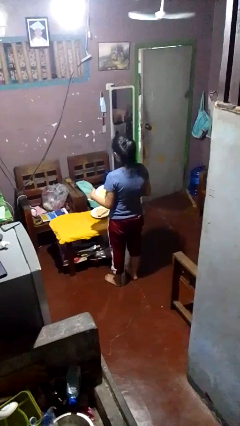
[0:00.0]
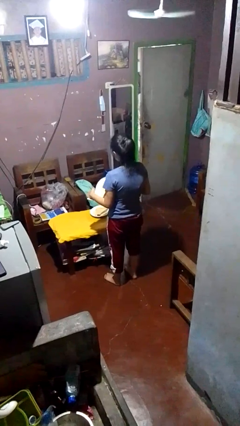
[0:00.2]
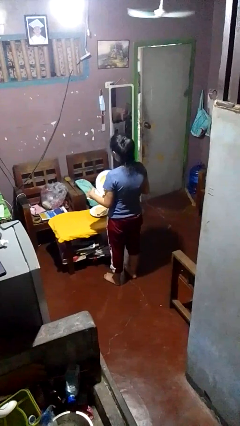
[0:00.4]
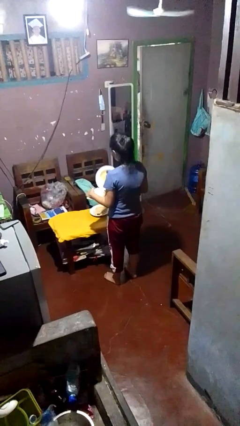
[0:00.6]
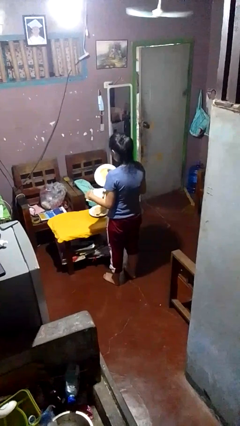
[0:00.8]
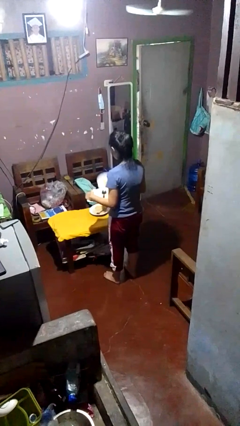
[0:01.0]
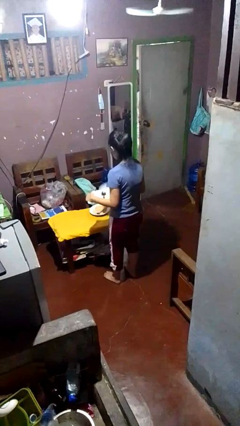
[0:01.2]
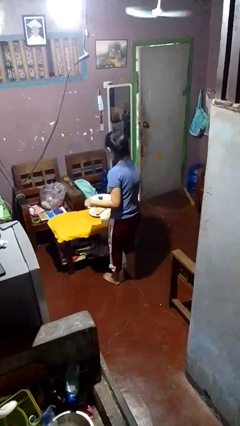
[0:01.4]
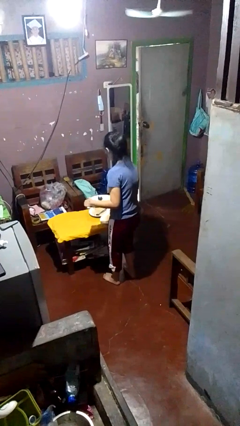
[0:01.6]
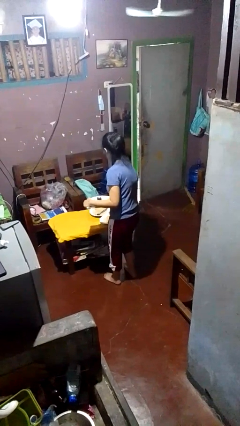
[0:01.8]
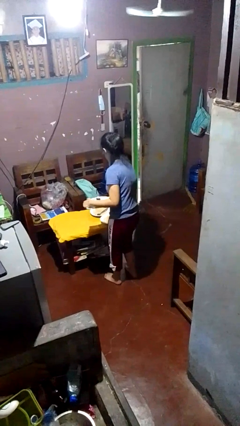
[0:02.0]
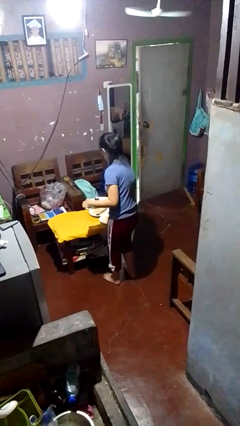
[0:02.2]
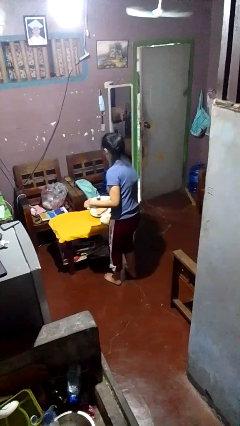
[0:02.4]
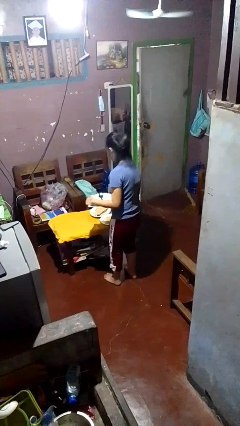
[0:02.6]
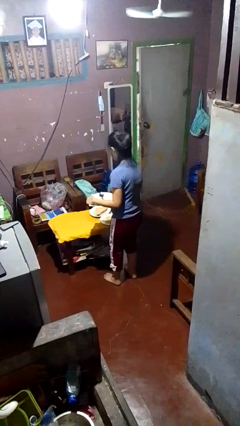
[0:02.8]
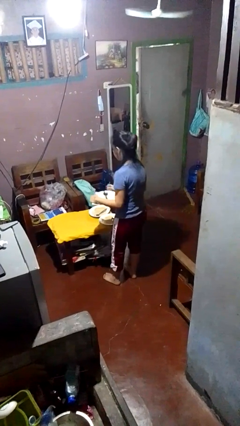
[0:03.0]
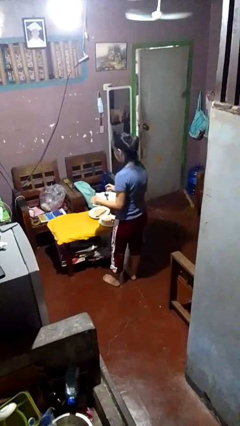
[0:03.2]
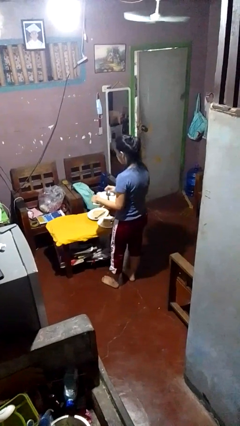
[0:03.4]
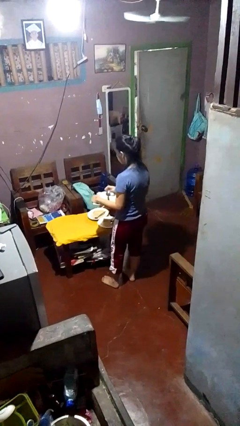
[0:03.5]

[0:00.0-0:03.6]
person sets table

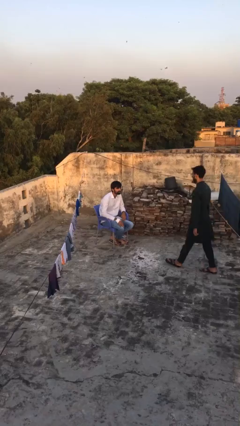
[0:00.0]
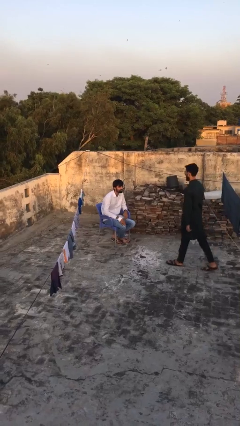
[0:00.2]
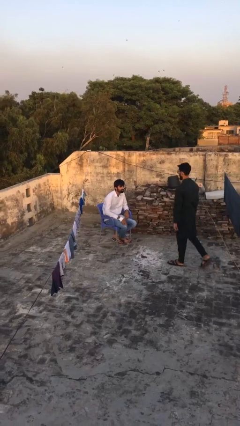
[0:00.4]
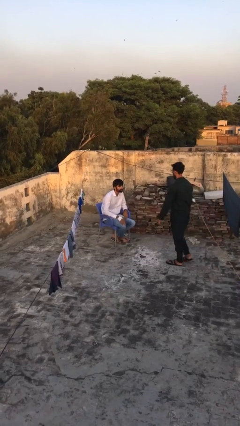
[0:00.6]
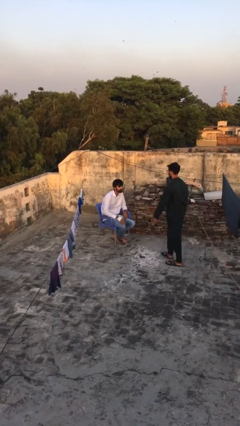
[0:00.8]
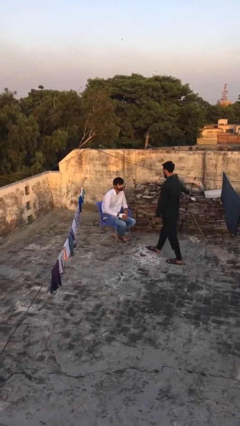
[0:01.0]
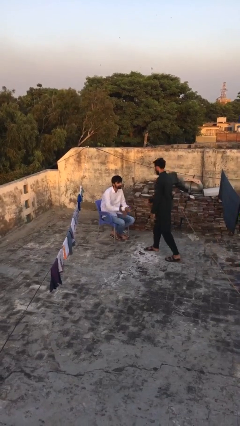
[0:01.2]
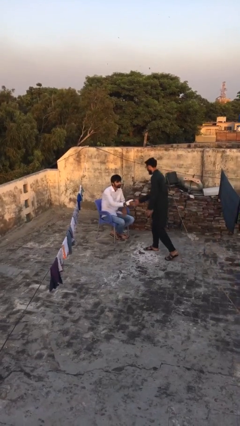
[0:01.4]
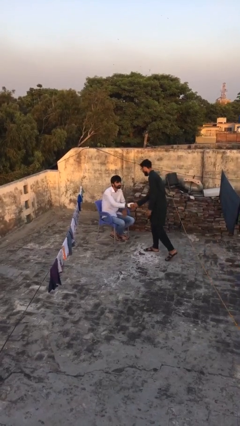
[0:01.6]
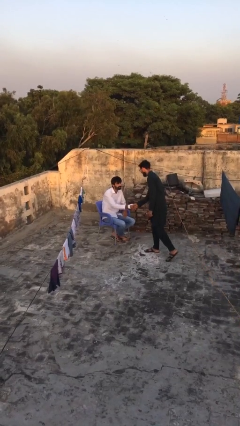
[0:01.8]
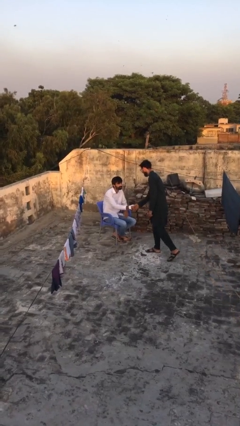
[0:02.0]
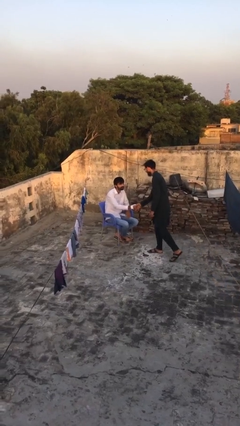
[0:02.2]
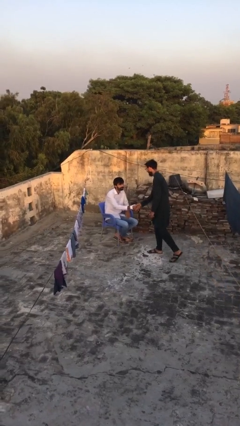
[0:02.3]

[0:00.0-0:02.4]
person shakes hand

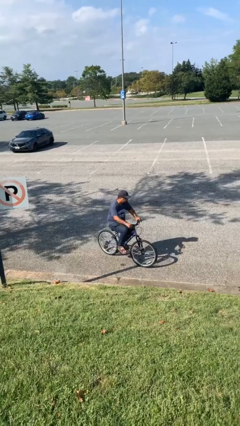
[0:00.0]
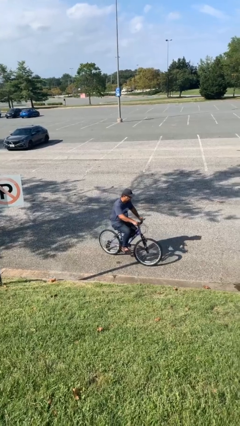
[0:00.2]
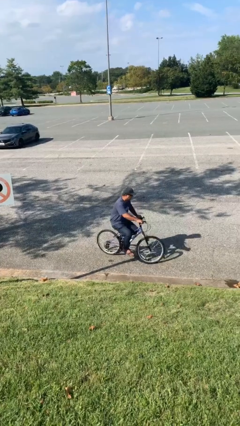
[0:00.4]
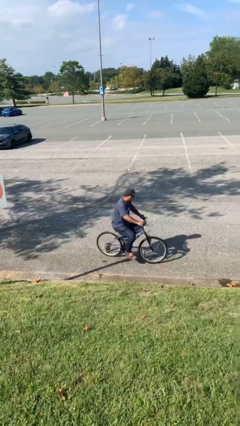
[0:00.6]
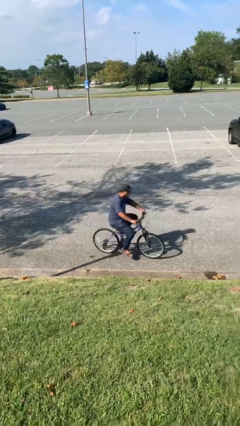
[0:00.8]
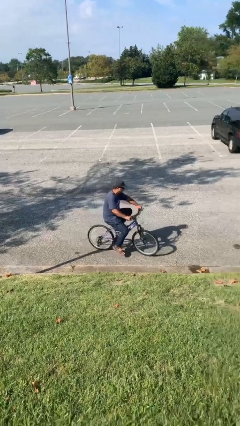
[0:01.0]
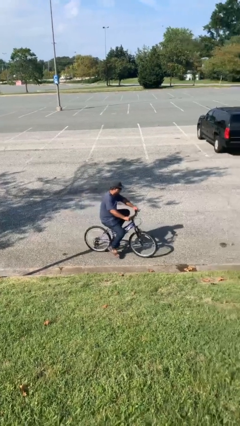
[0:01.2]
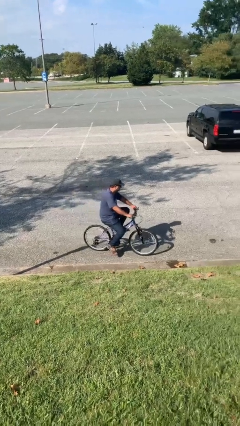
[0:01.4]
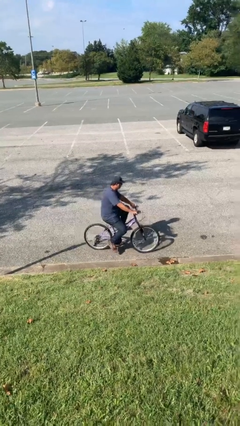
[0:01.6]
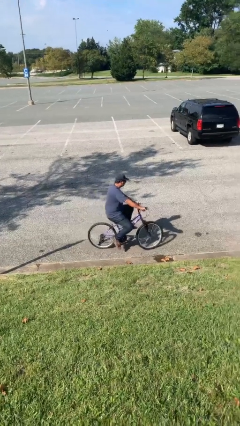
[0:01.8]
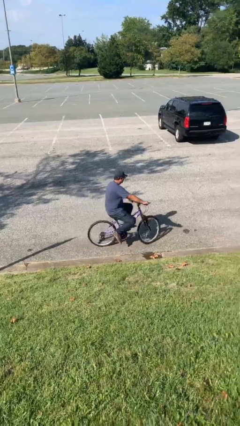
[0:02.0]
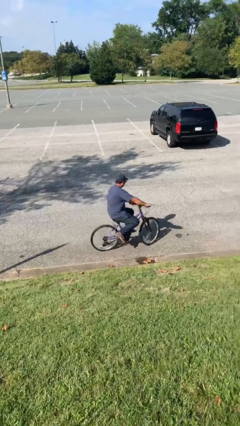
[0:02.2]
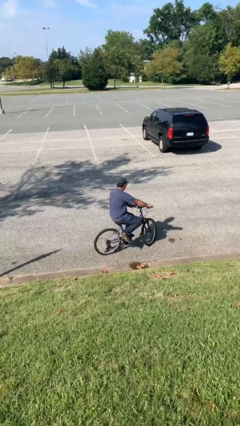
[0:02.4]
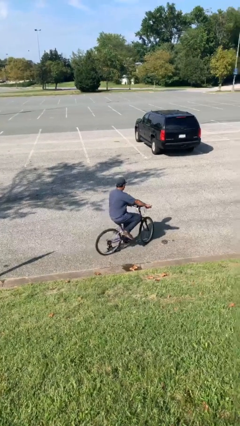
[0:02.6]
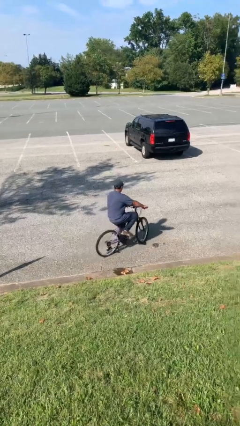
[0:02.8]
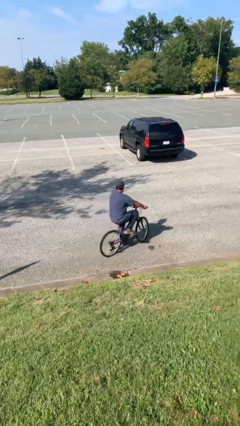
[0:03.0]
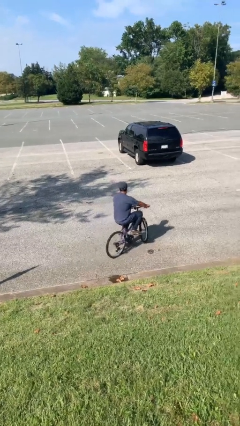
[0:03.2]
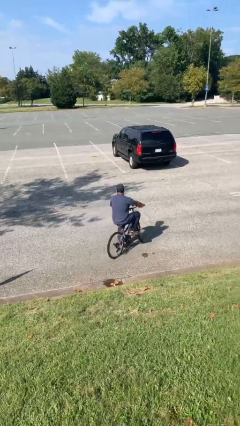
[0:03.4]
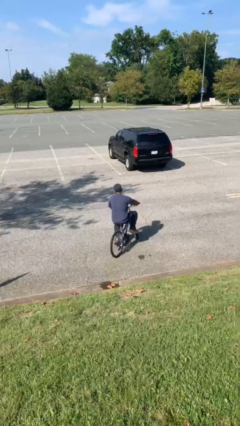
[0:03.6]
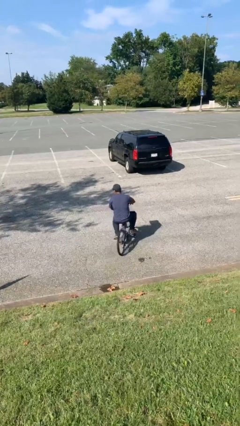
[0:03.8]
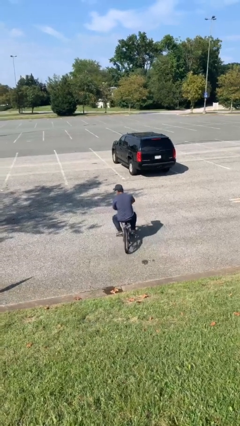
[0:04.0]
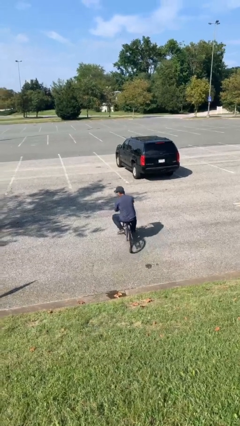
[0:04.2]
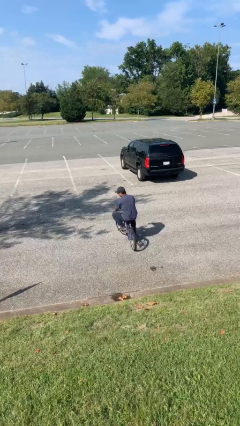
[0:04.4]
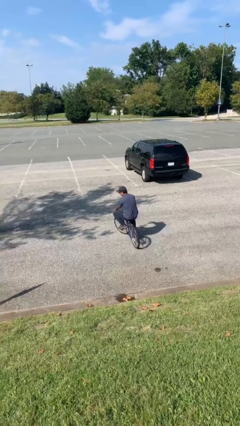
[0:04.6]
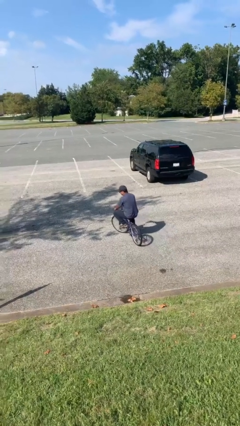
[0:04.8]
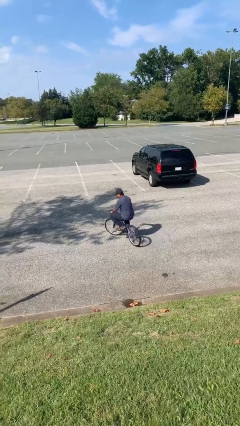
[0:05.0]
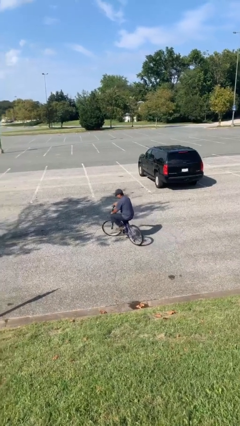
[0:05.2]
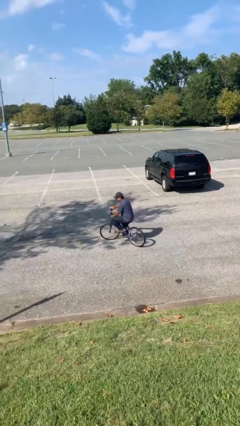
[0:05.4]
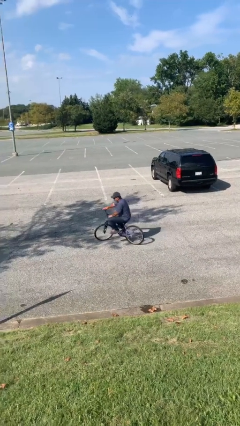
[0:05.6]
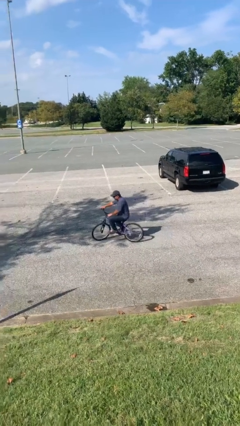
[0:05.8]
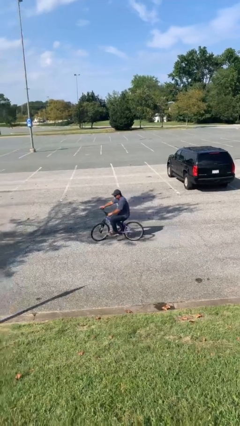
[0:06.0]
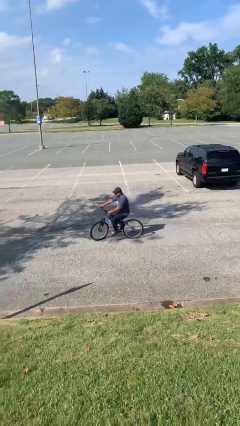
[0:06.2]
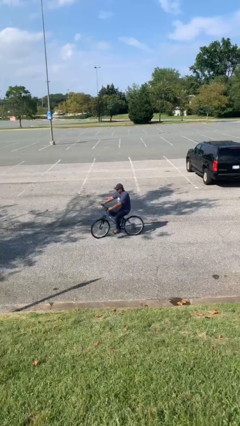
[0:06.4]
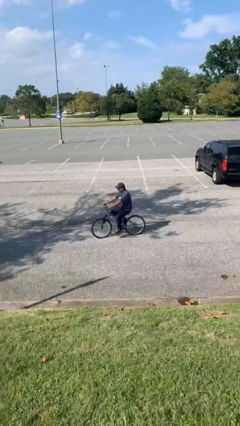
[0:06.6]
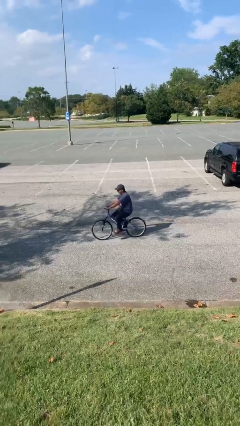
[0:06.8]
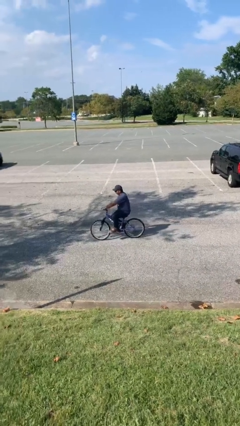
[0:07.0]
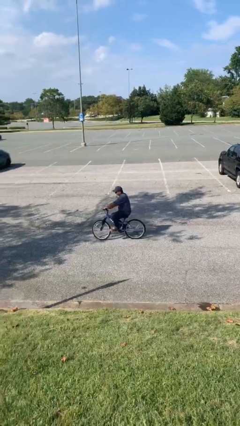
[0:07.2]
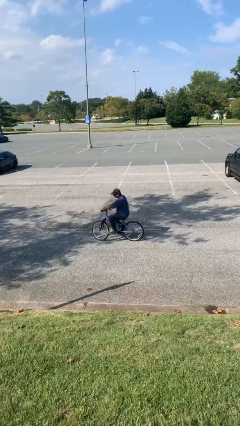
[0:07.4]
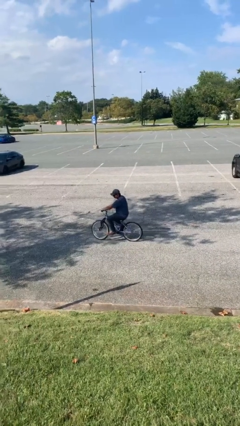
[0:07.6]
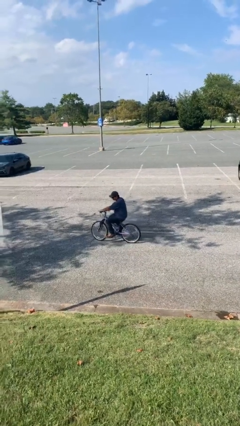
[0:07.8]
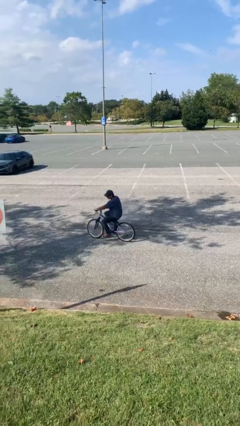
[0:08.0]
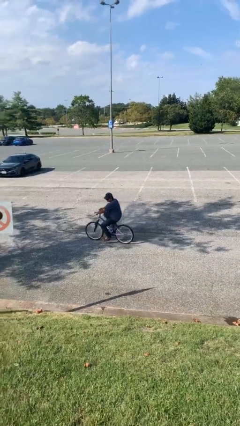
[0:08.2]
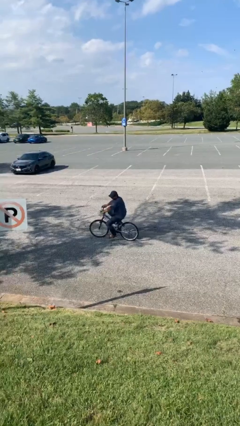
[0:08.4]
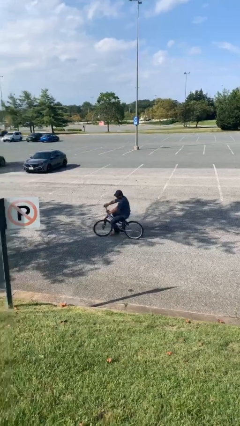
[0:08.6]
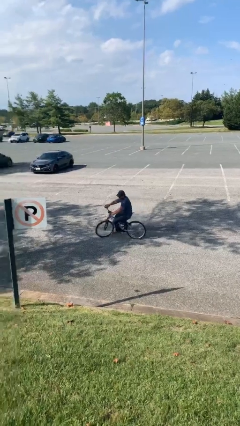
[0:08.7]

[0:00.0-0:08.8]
person rides bicycle

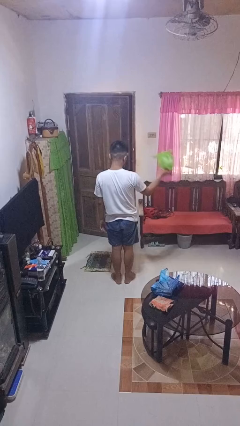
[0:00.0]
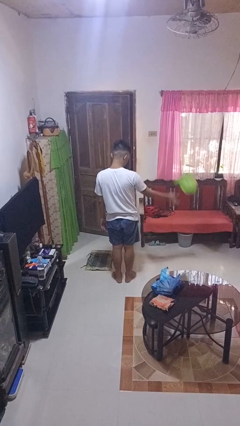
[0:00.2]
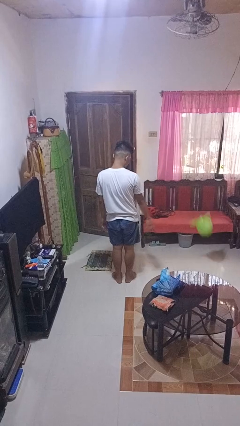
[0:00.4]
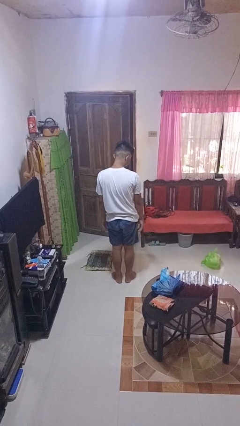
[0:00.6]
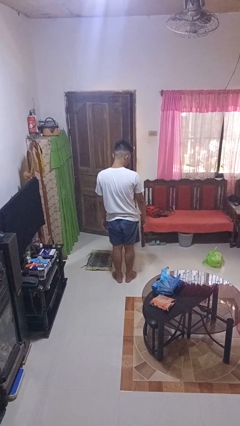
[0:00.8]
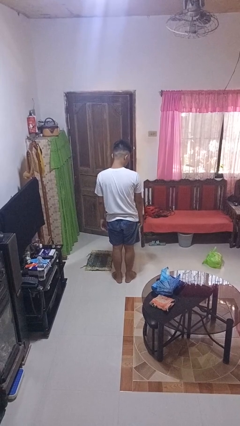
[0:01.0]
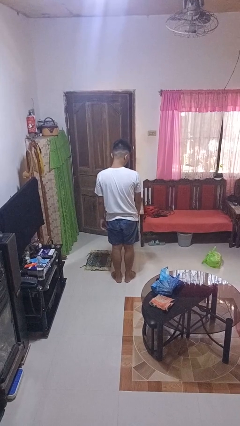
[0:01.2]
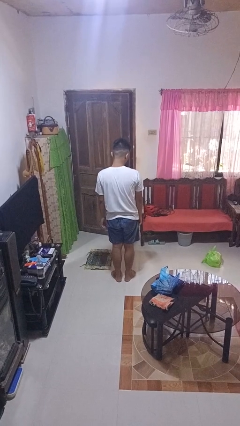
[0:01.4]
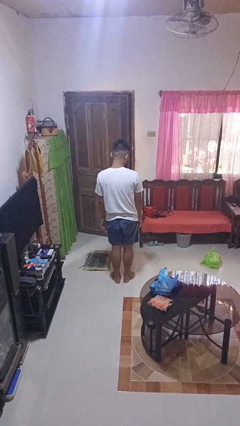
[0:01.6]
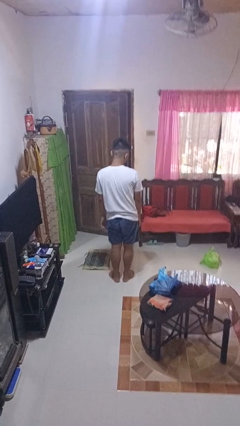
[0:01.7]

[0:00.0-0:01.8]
person throws object to ground

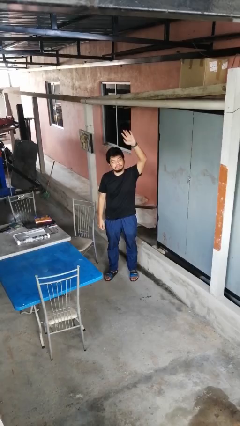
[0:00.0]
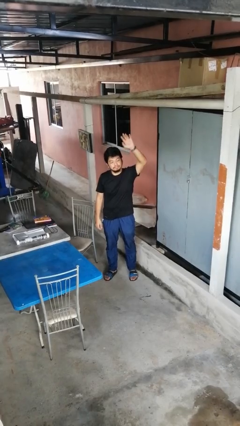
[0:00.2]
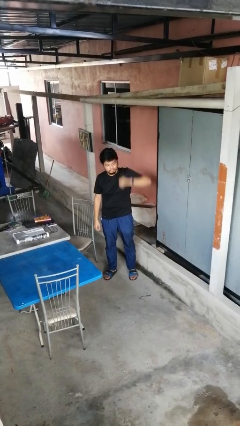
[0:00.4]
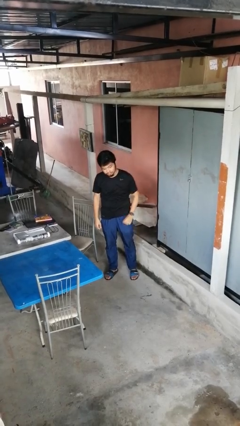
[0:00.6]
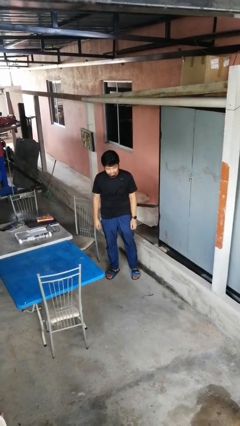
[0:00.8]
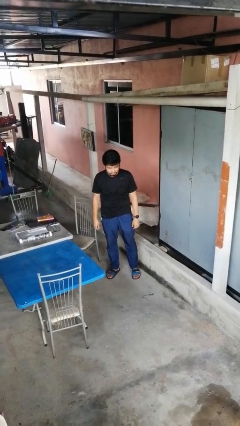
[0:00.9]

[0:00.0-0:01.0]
person gestures lower hand
